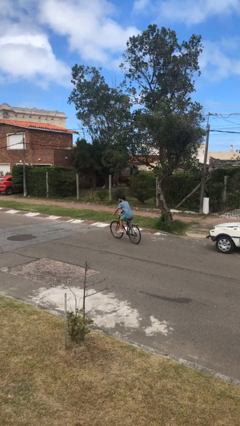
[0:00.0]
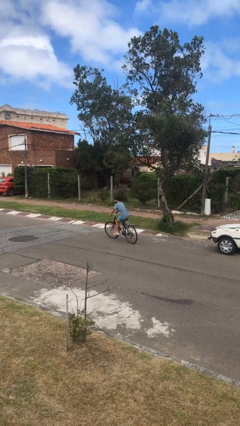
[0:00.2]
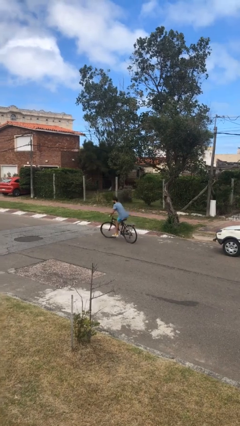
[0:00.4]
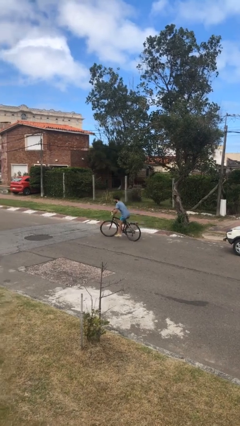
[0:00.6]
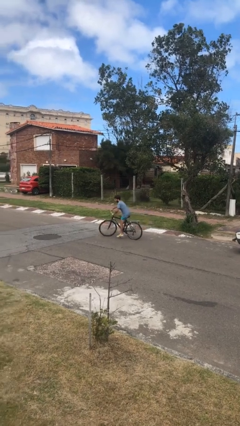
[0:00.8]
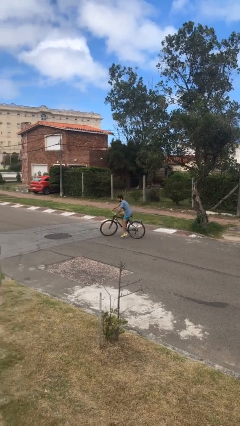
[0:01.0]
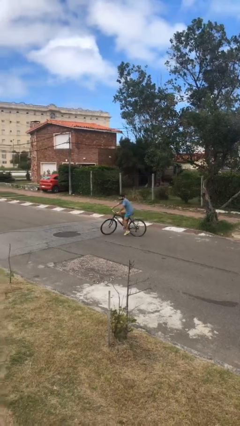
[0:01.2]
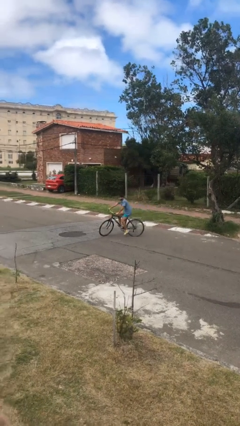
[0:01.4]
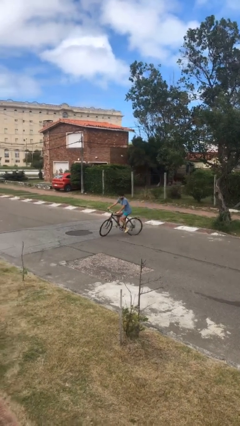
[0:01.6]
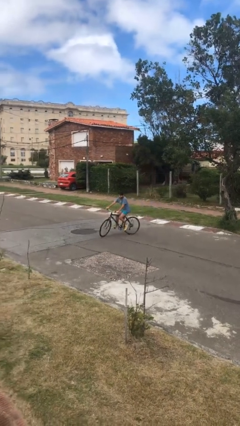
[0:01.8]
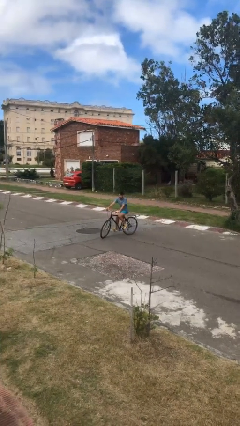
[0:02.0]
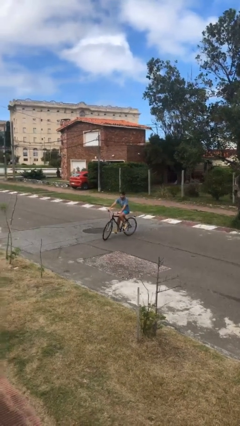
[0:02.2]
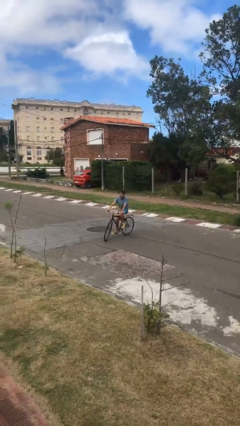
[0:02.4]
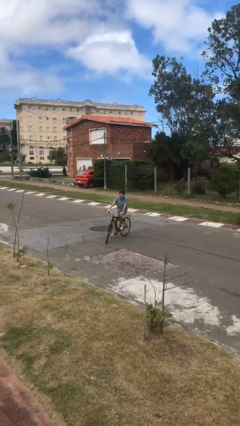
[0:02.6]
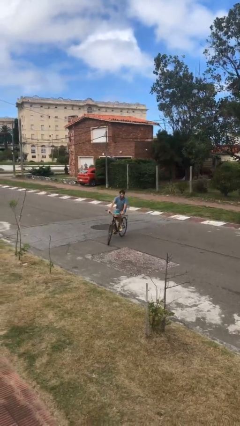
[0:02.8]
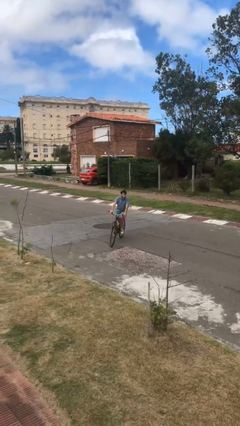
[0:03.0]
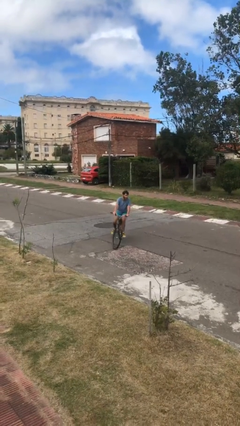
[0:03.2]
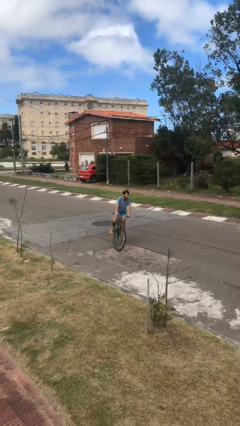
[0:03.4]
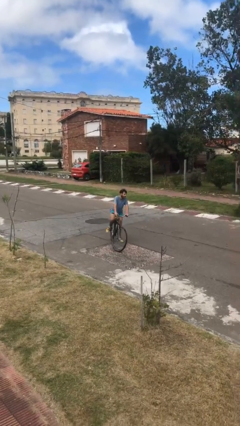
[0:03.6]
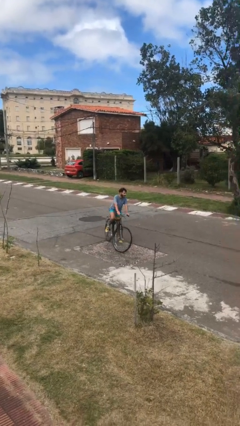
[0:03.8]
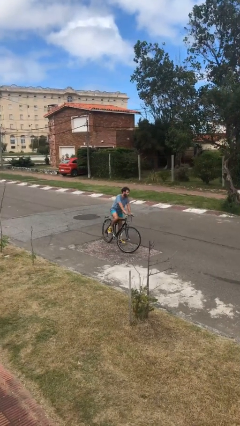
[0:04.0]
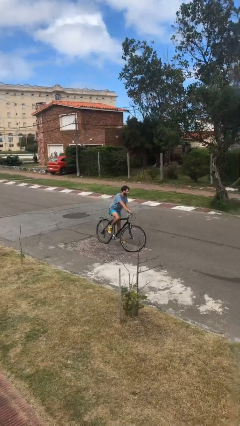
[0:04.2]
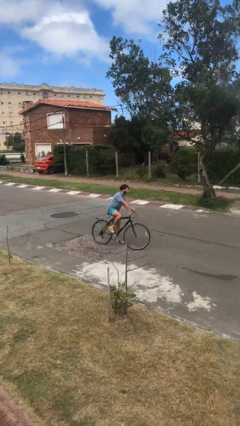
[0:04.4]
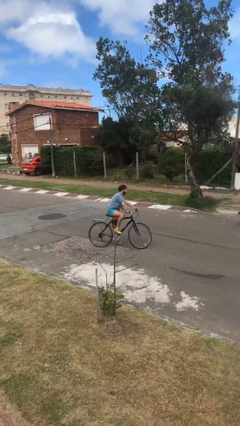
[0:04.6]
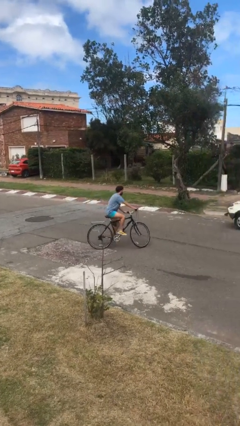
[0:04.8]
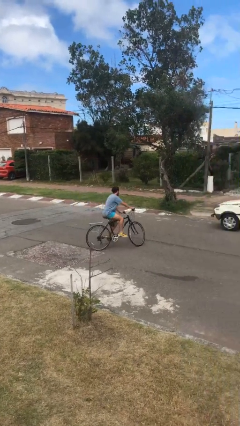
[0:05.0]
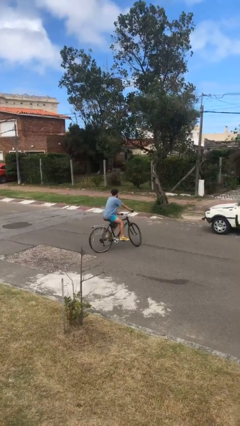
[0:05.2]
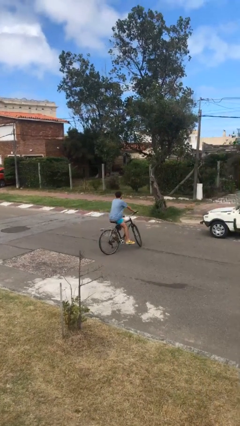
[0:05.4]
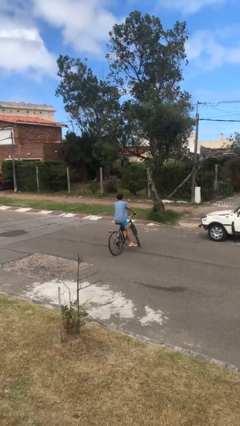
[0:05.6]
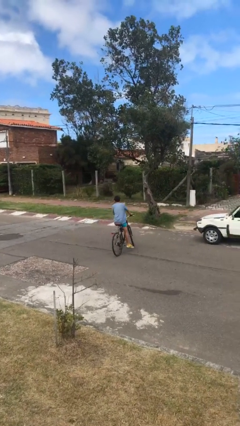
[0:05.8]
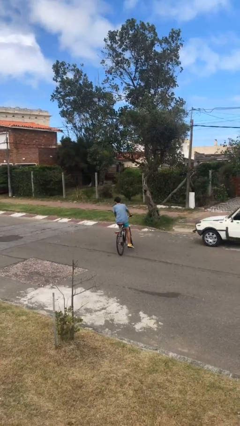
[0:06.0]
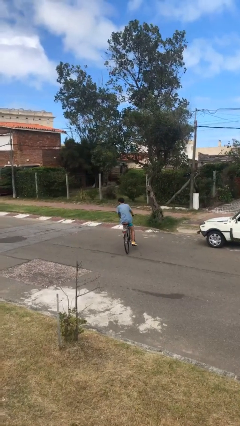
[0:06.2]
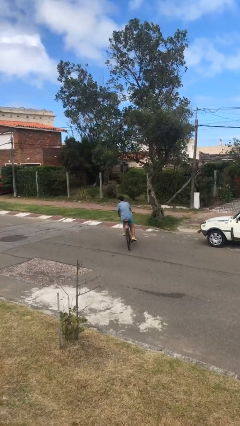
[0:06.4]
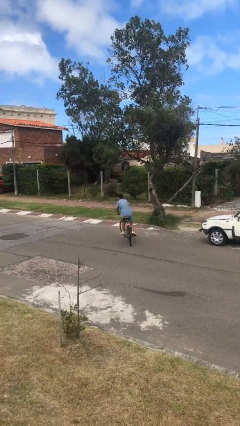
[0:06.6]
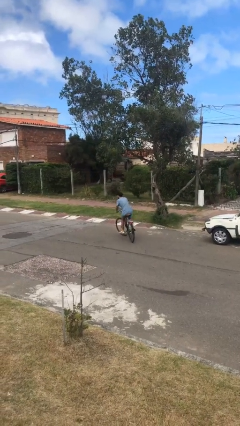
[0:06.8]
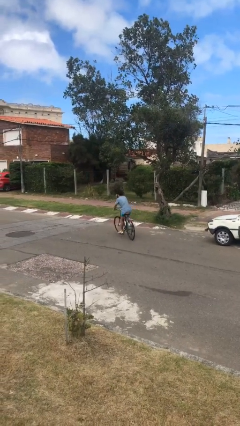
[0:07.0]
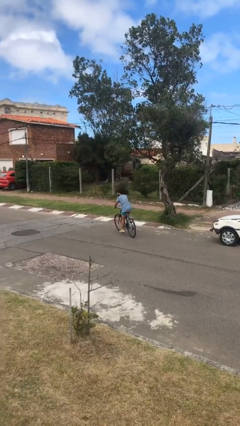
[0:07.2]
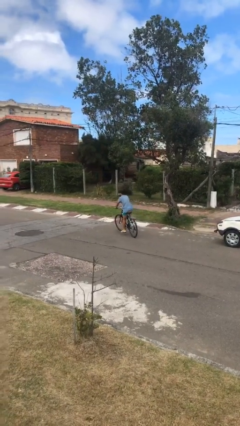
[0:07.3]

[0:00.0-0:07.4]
person rides bicycle

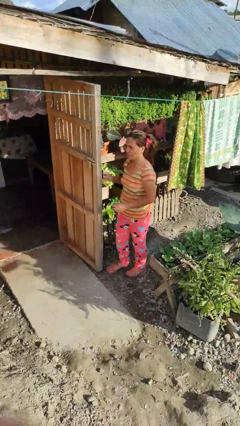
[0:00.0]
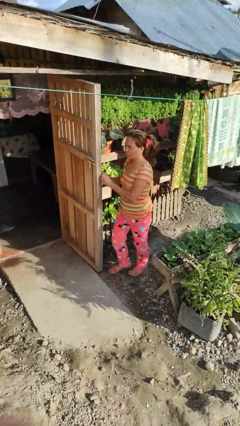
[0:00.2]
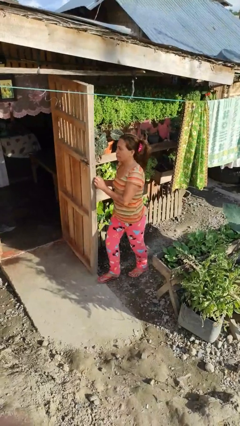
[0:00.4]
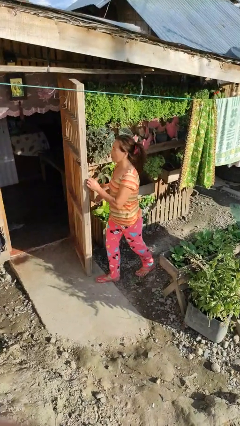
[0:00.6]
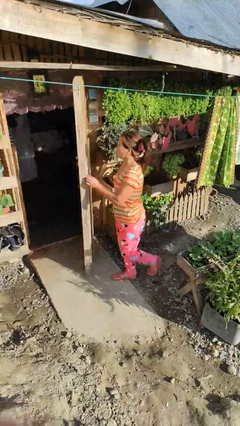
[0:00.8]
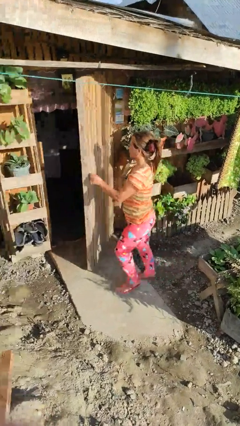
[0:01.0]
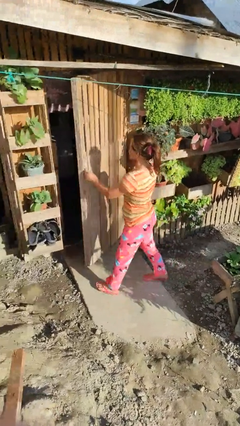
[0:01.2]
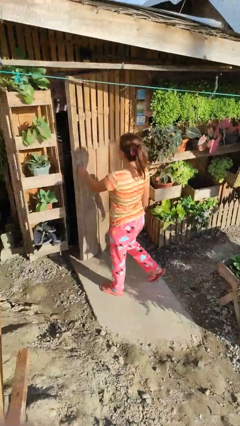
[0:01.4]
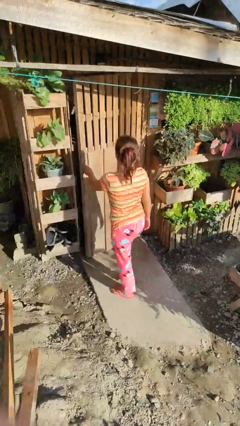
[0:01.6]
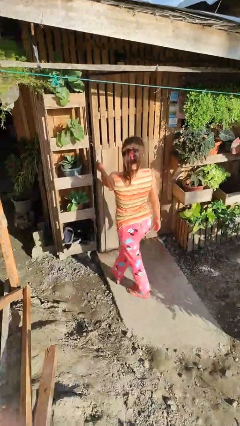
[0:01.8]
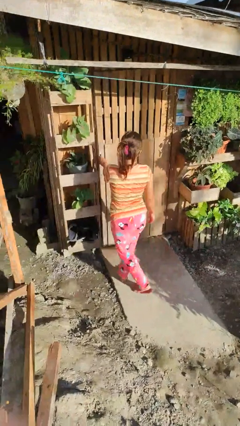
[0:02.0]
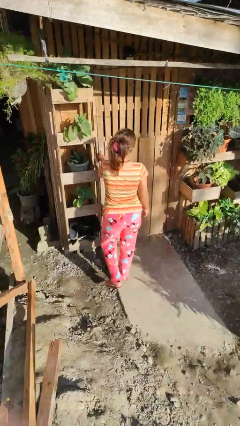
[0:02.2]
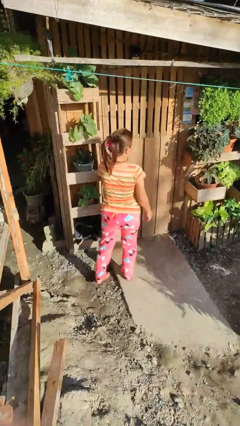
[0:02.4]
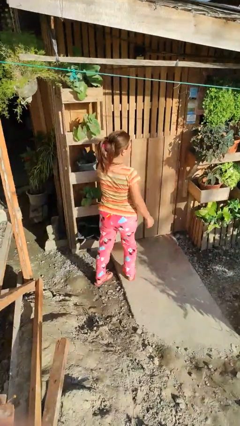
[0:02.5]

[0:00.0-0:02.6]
person closes facility door

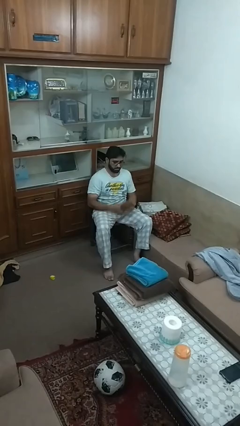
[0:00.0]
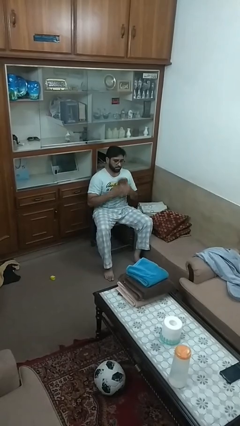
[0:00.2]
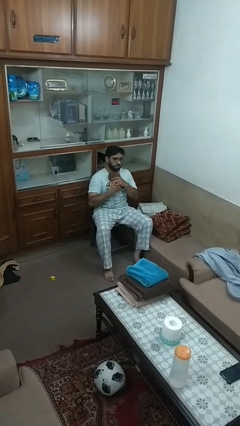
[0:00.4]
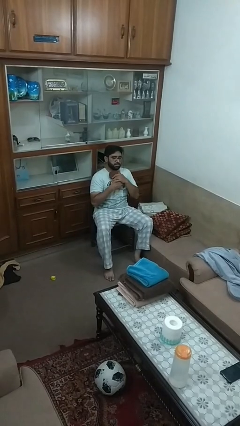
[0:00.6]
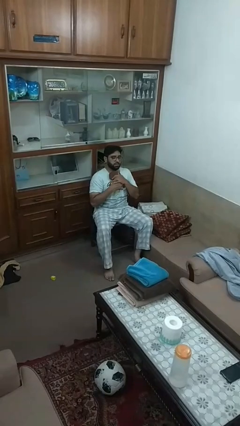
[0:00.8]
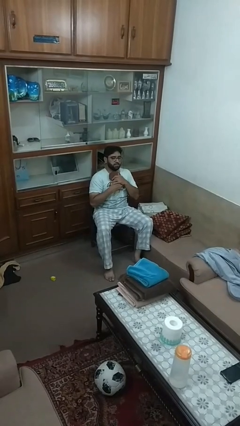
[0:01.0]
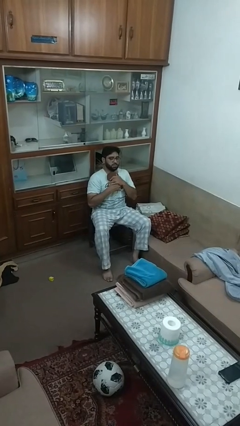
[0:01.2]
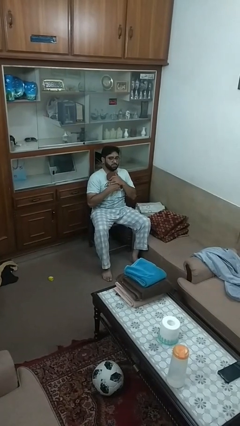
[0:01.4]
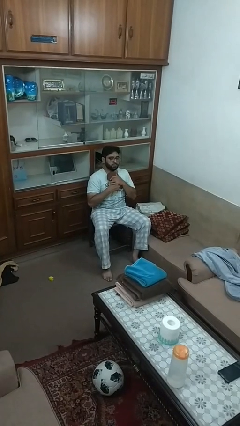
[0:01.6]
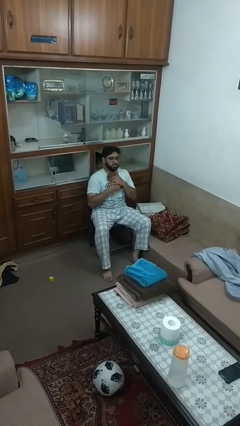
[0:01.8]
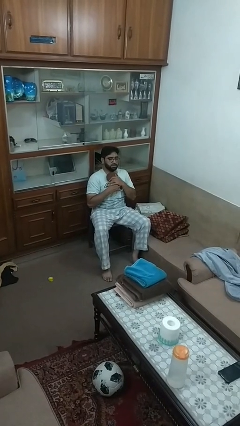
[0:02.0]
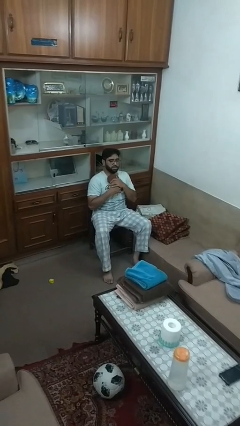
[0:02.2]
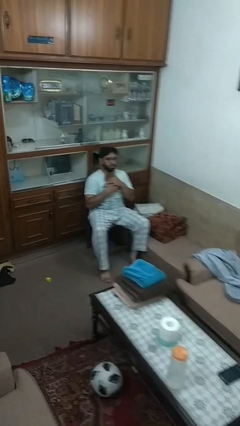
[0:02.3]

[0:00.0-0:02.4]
person hugs stuffed animal

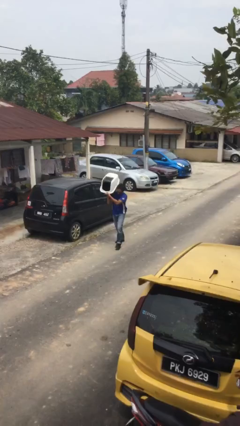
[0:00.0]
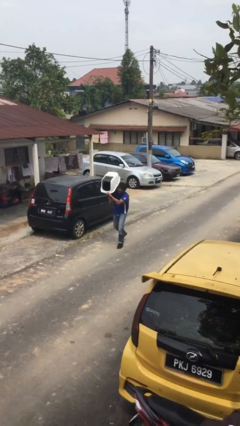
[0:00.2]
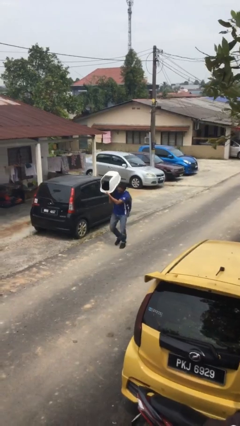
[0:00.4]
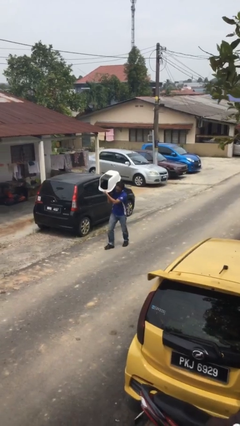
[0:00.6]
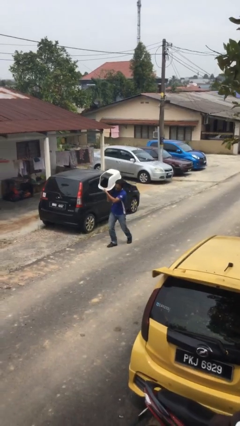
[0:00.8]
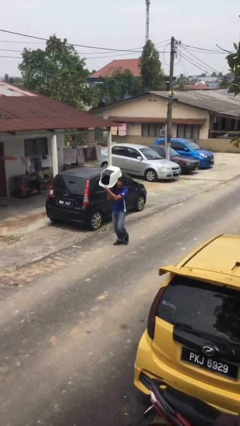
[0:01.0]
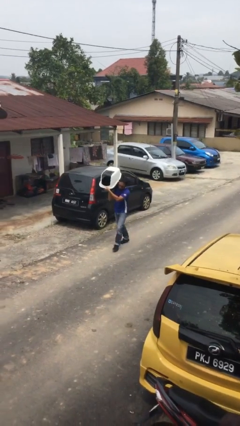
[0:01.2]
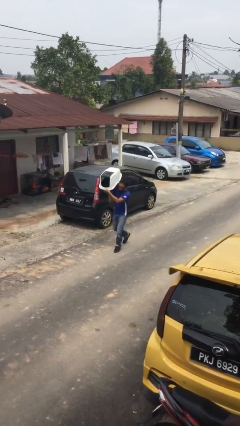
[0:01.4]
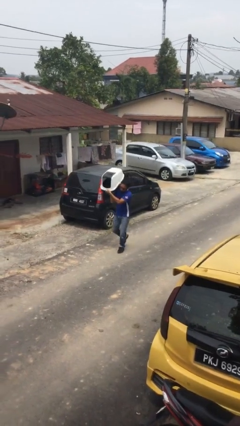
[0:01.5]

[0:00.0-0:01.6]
person carries heavy object

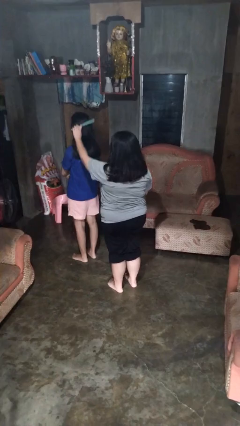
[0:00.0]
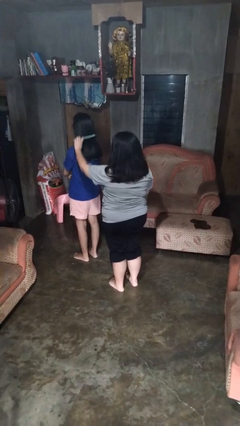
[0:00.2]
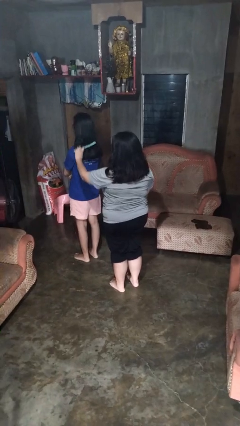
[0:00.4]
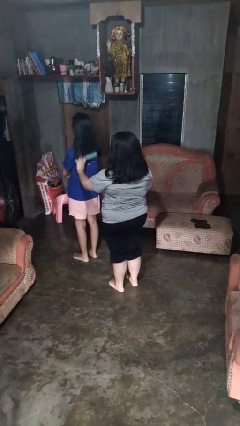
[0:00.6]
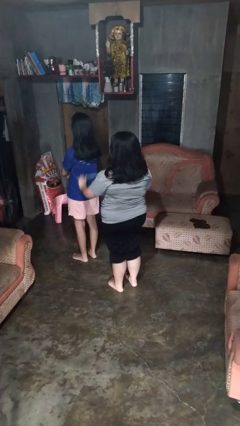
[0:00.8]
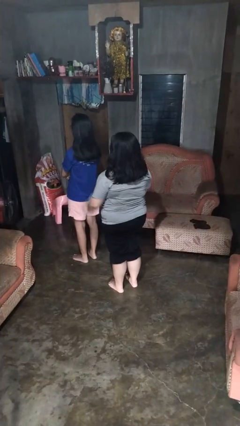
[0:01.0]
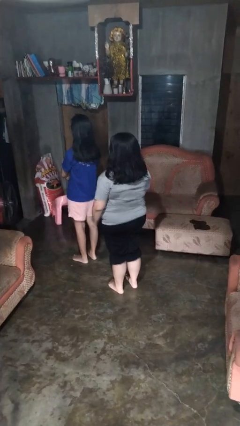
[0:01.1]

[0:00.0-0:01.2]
person brushes hair of person

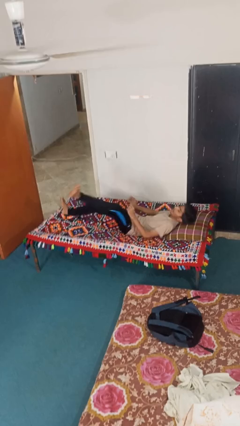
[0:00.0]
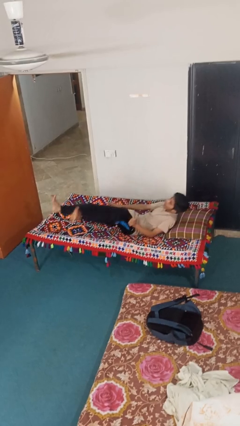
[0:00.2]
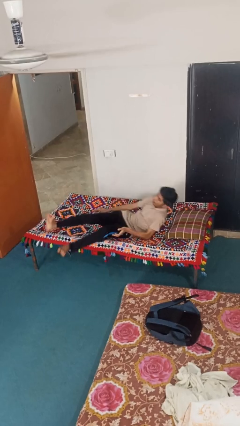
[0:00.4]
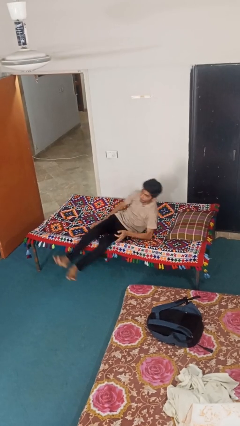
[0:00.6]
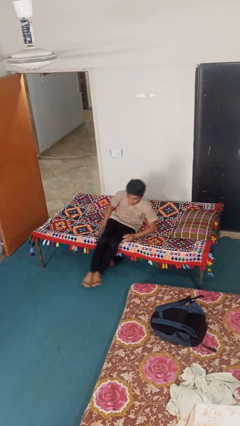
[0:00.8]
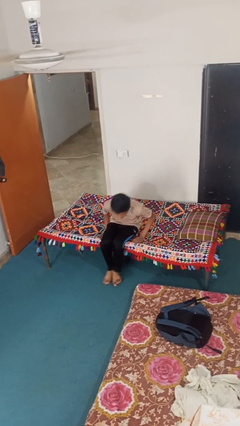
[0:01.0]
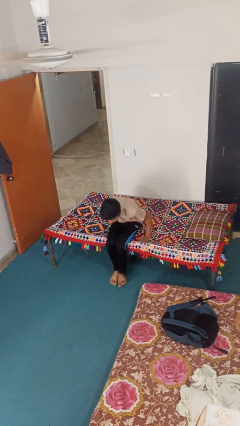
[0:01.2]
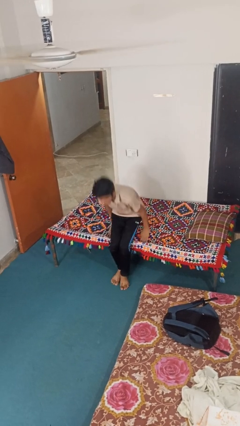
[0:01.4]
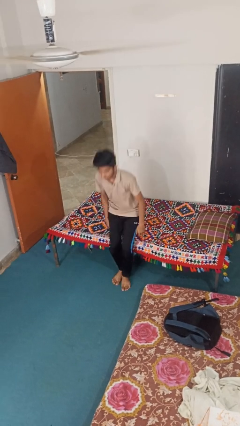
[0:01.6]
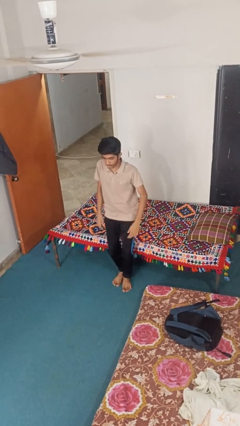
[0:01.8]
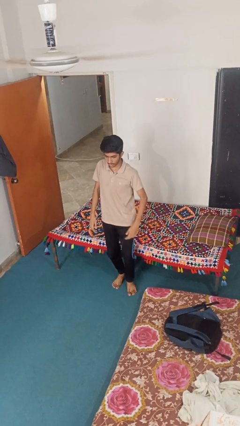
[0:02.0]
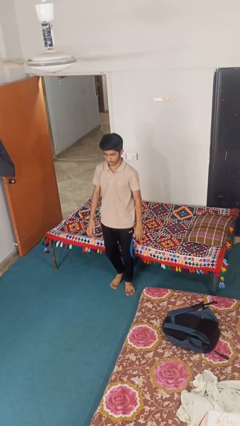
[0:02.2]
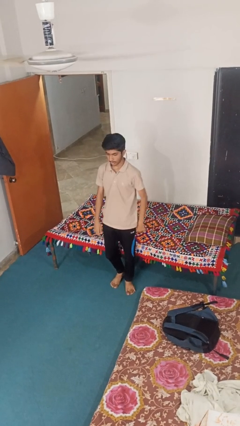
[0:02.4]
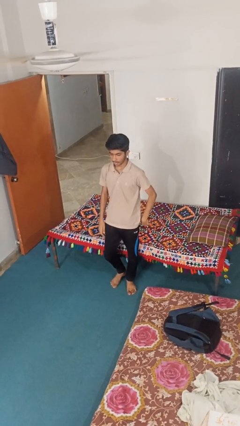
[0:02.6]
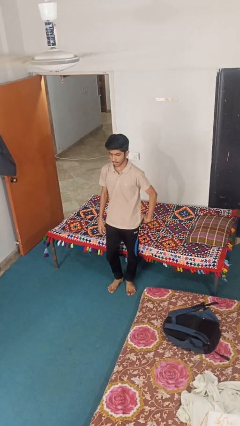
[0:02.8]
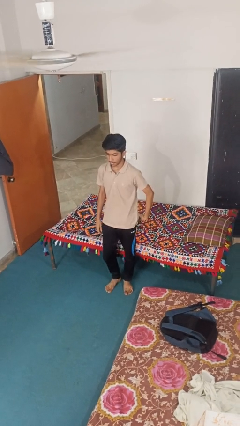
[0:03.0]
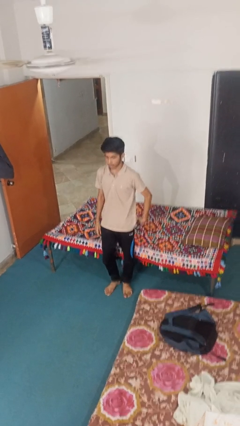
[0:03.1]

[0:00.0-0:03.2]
person stands up
